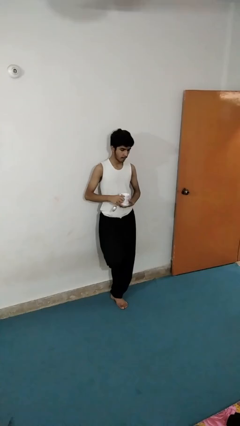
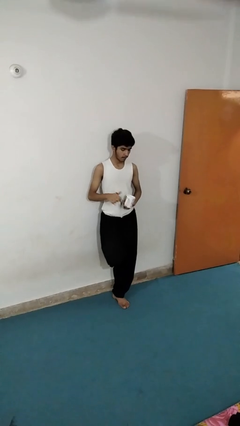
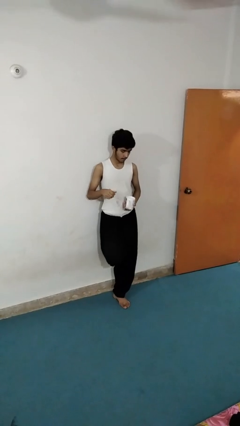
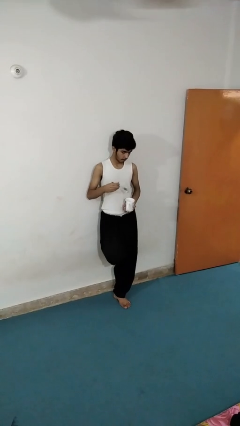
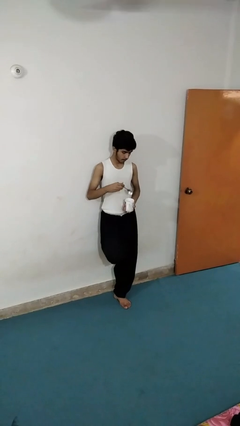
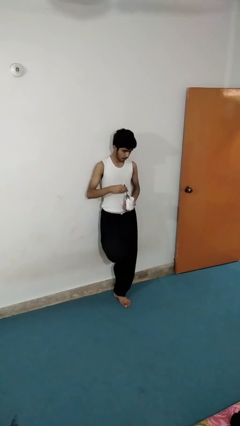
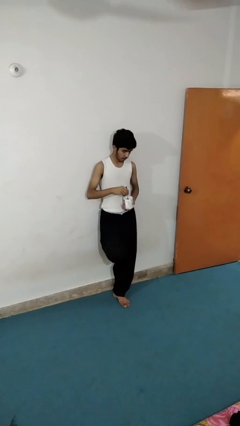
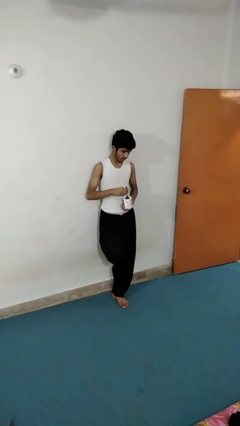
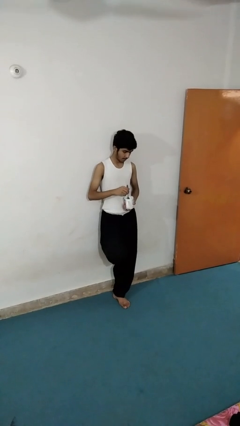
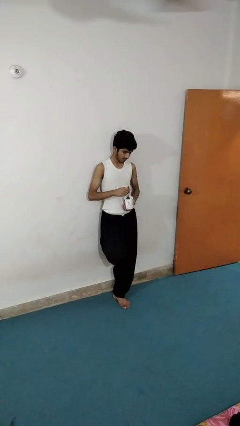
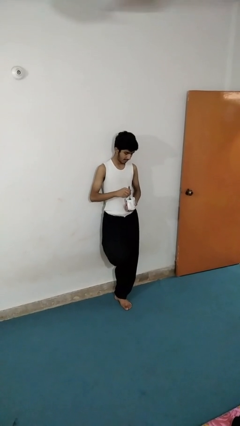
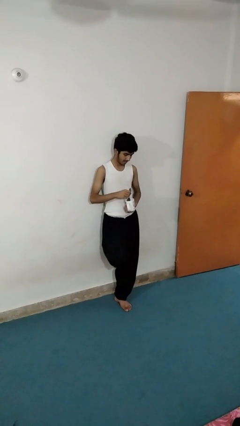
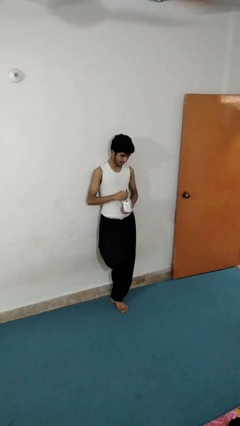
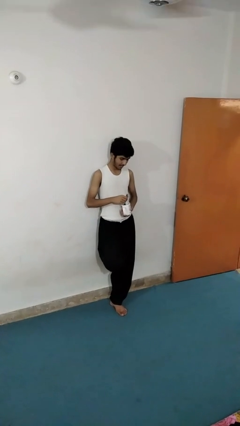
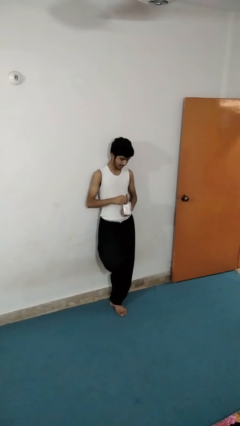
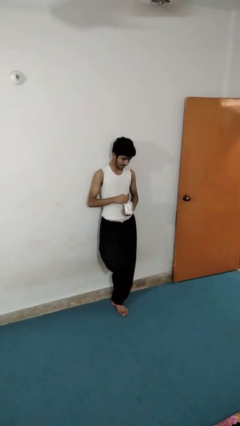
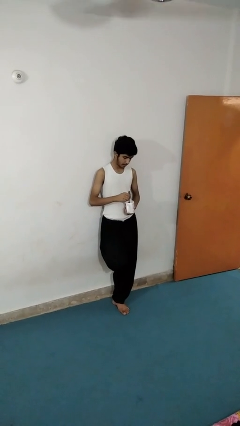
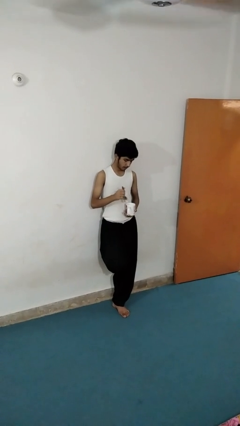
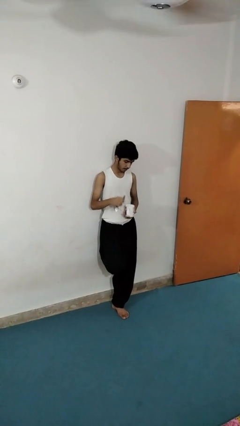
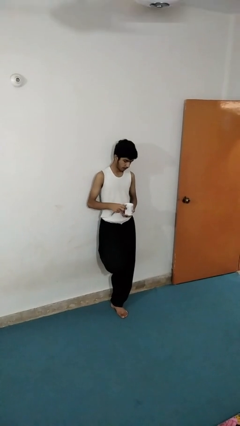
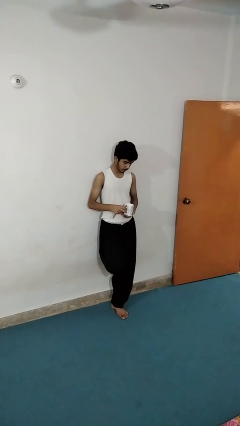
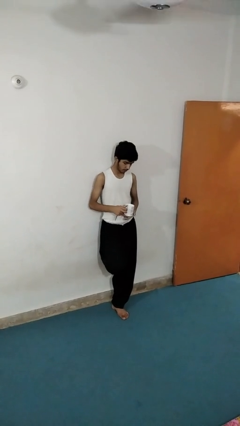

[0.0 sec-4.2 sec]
person stirs mug

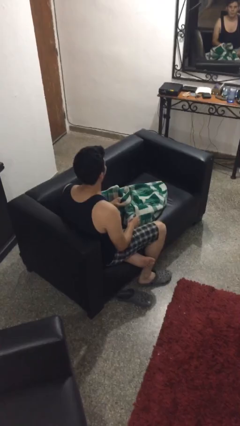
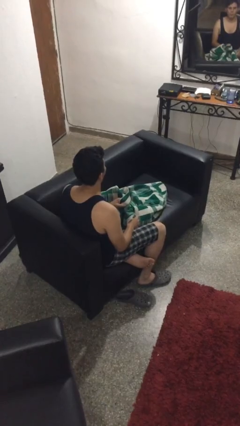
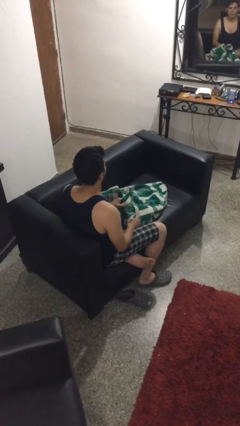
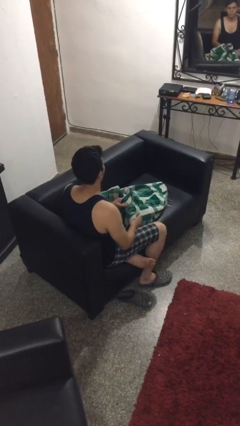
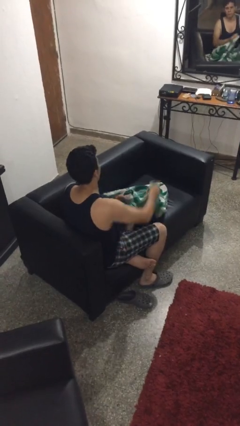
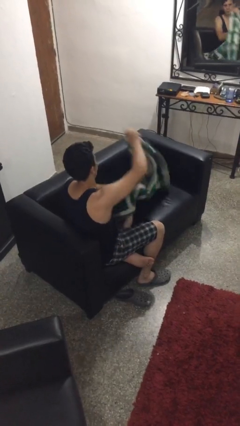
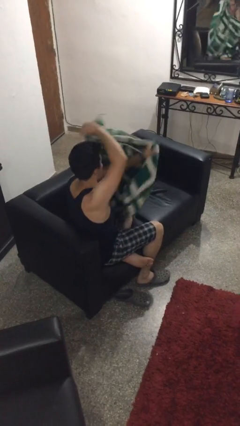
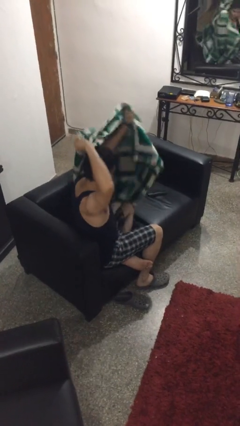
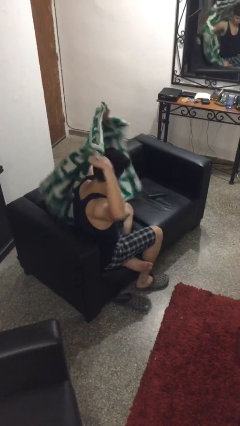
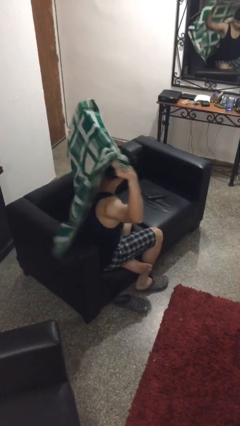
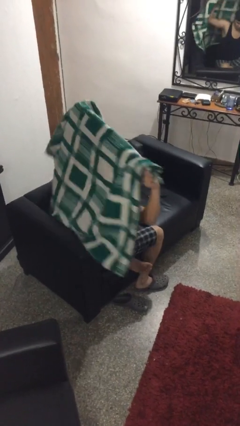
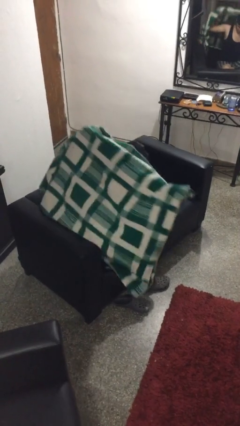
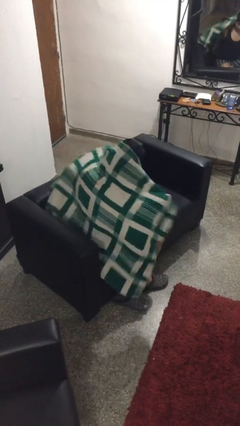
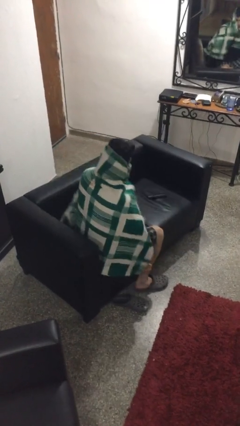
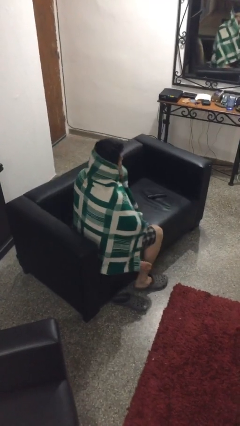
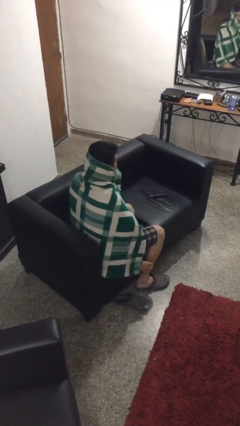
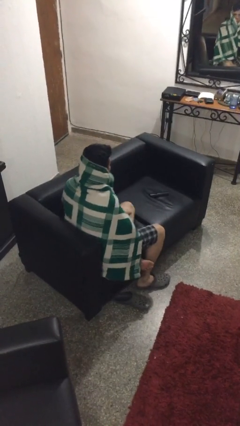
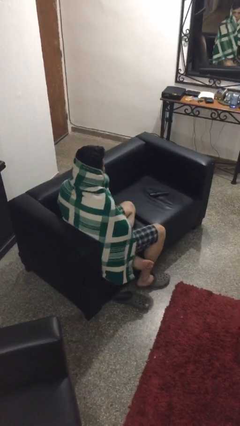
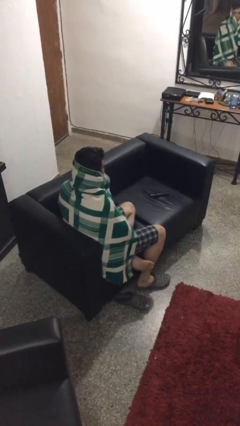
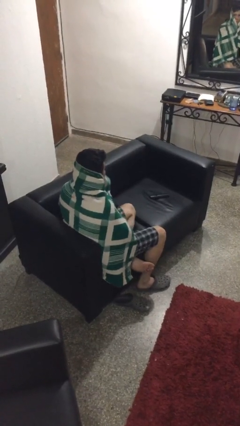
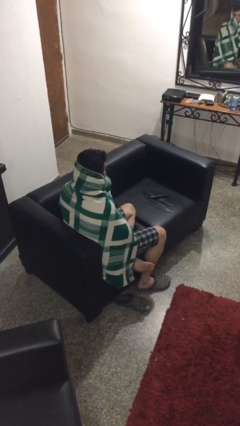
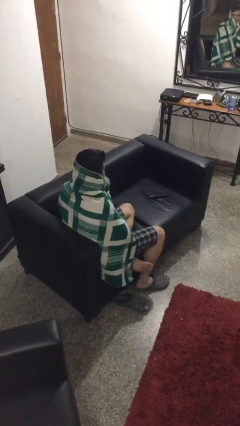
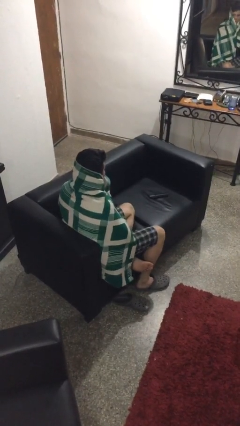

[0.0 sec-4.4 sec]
person covers with blanket

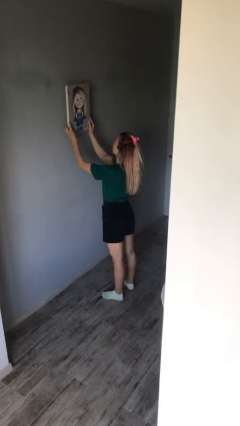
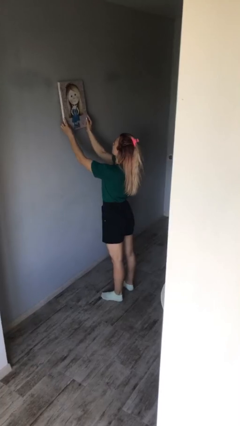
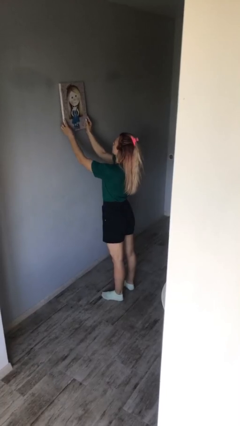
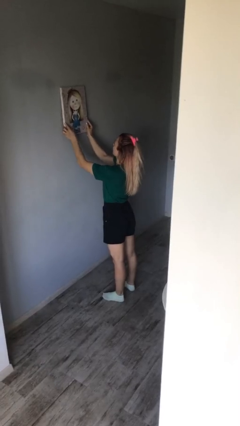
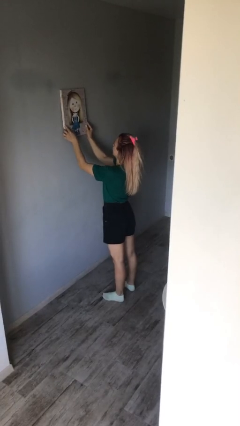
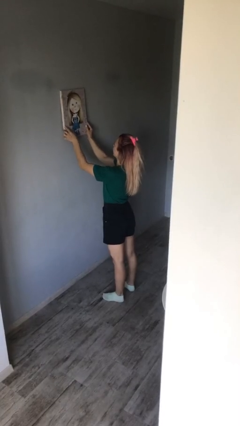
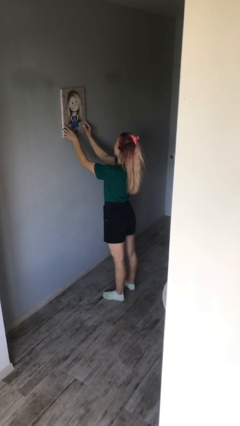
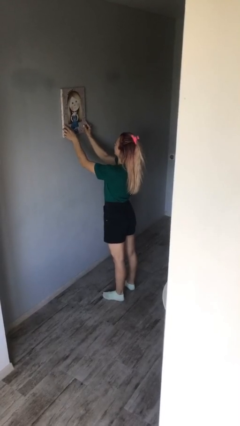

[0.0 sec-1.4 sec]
person puts up picture frame

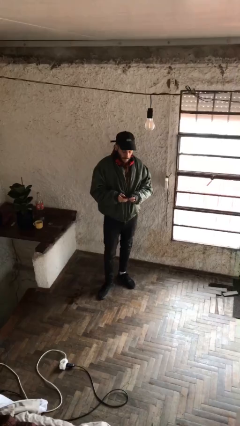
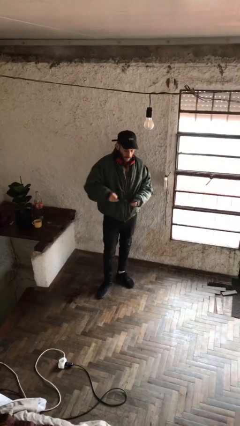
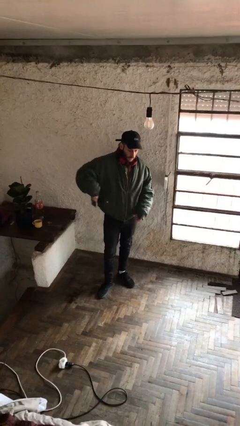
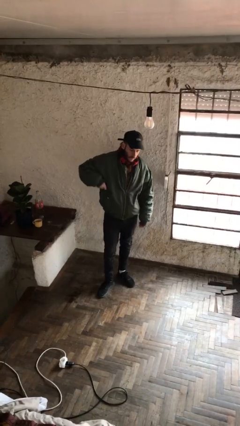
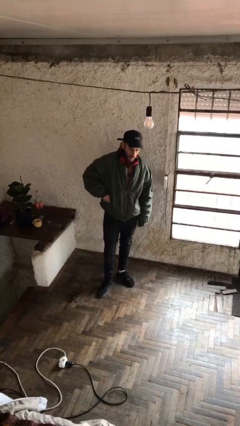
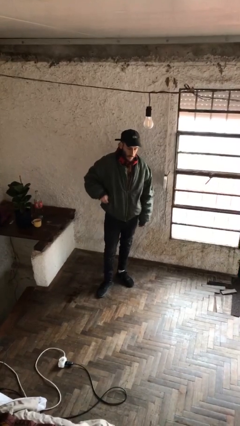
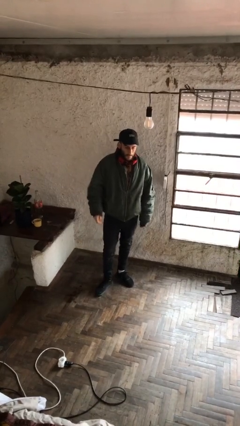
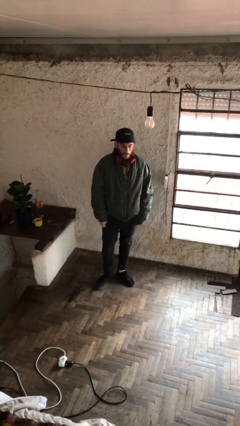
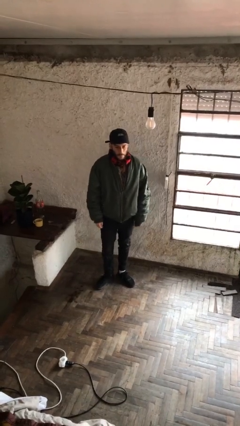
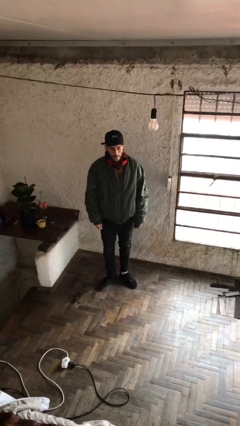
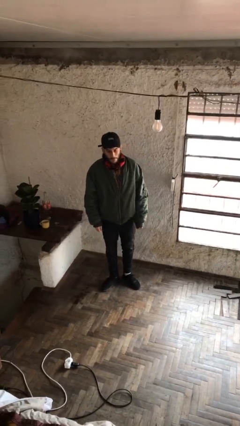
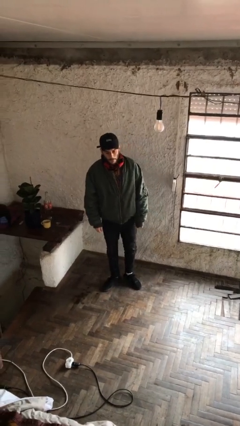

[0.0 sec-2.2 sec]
person puts phone into pocket

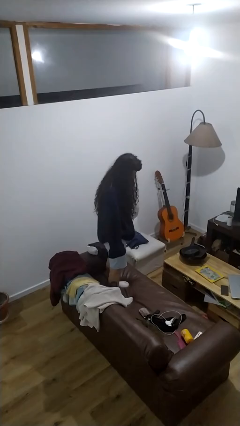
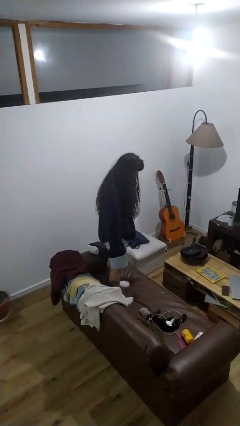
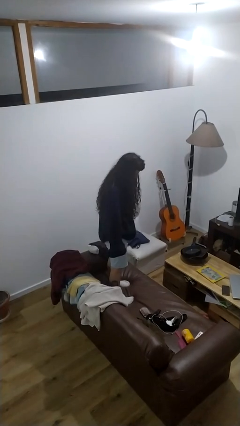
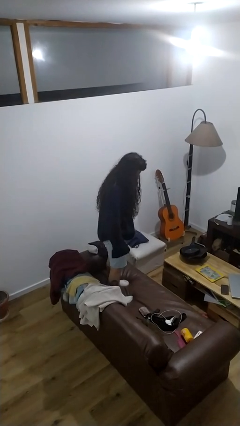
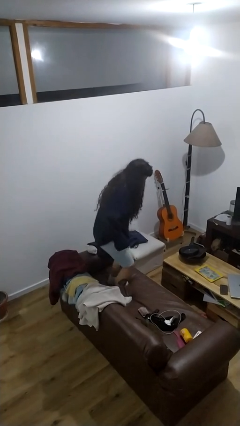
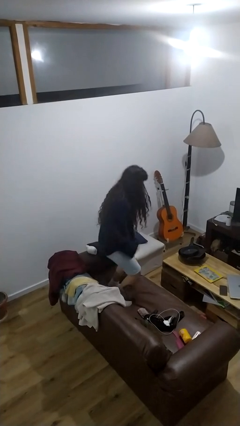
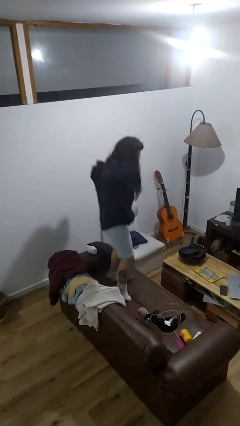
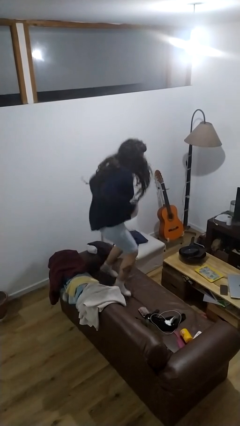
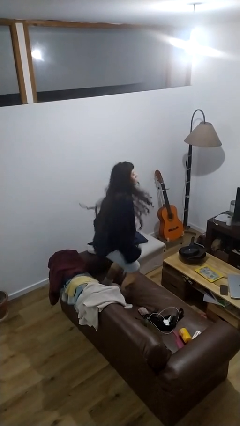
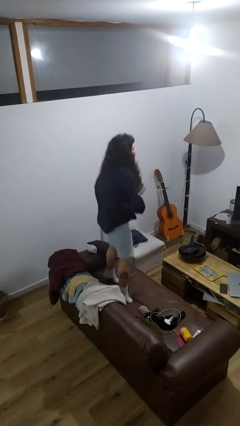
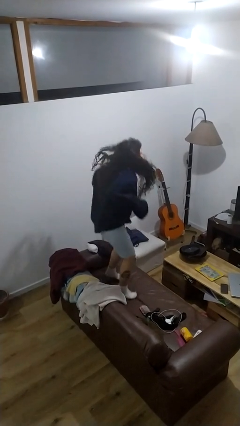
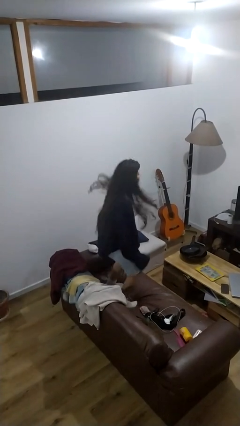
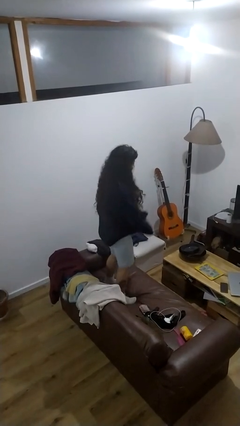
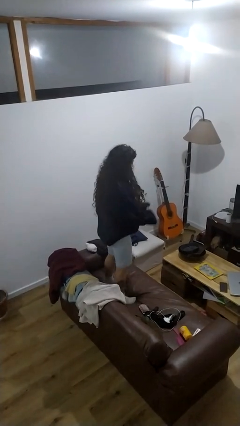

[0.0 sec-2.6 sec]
person jumps on couch

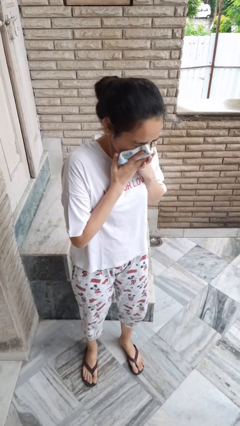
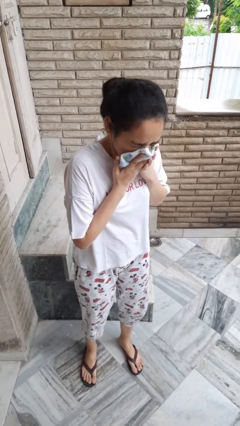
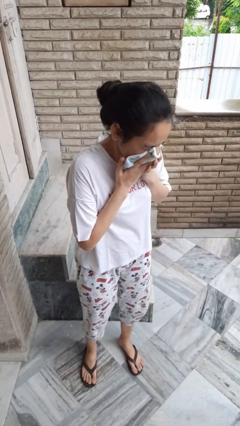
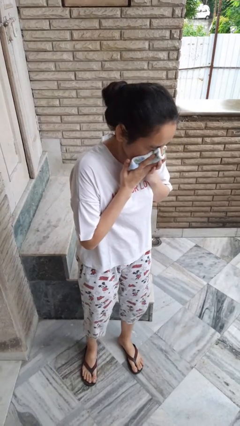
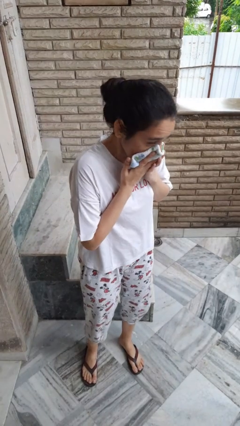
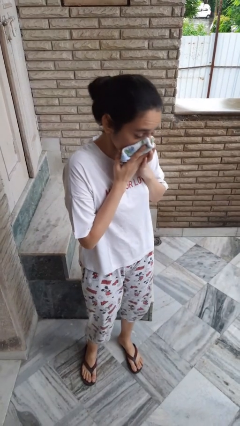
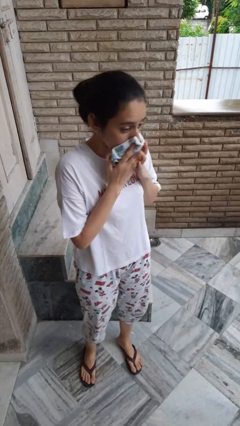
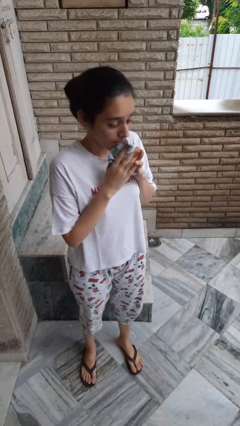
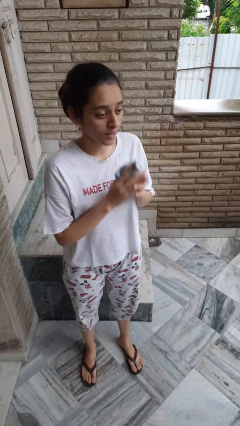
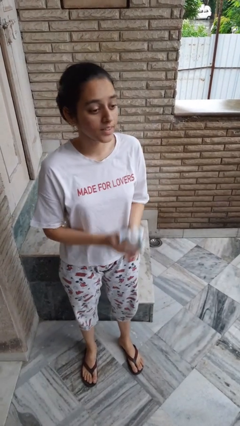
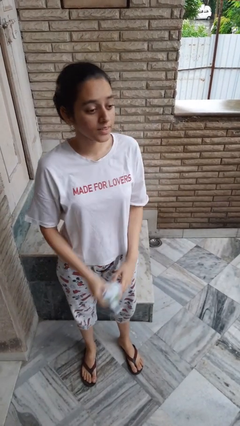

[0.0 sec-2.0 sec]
person blows nose

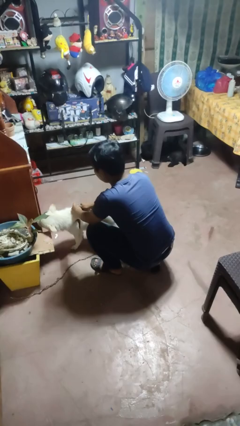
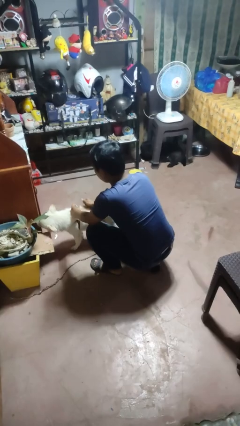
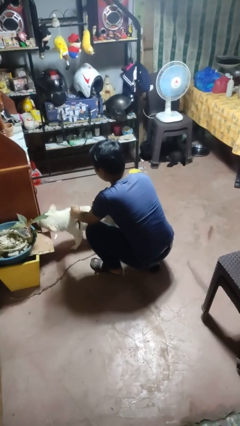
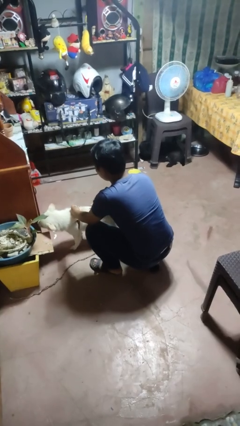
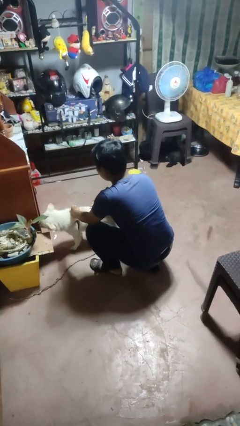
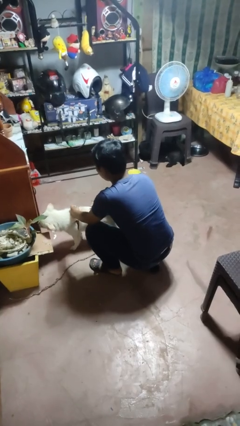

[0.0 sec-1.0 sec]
person unattaches leash from dog
